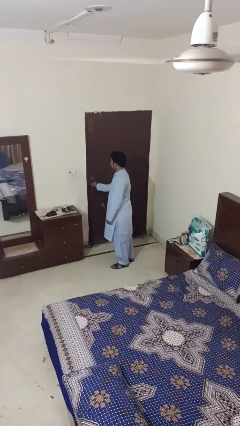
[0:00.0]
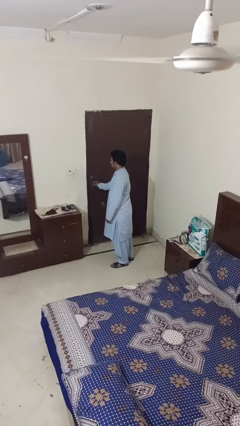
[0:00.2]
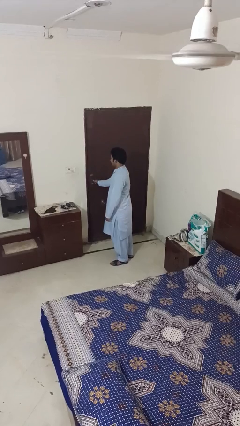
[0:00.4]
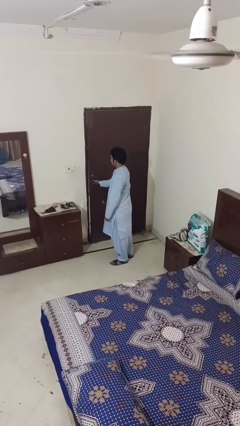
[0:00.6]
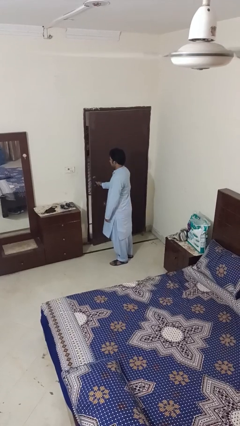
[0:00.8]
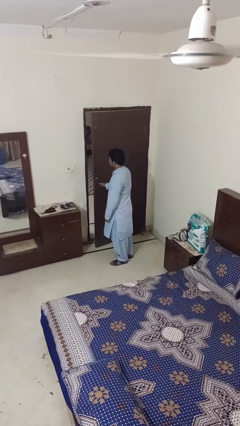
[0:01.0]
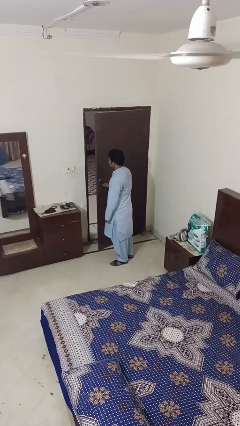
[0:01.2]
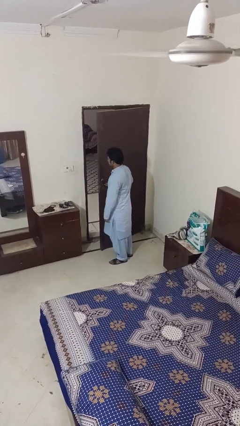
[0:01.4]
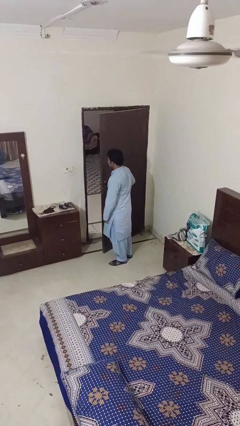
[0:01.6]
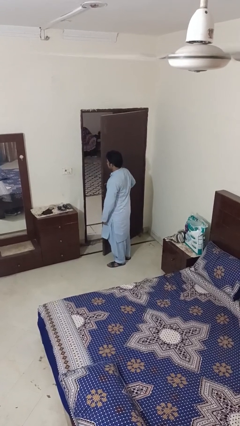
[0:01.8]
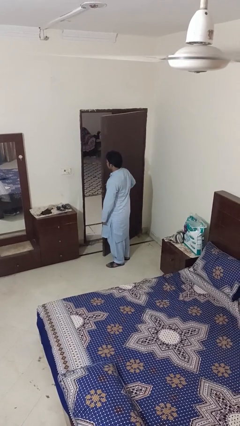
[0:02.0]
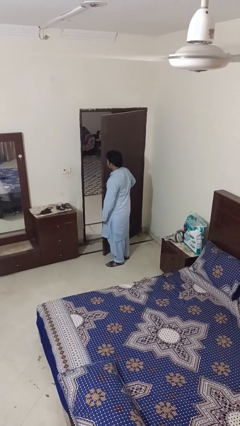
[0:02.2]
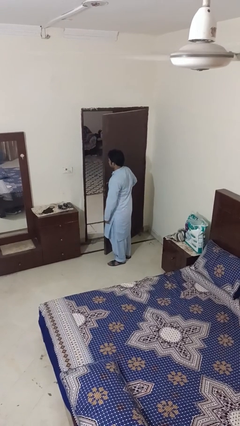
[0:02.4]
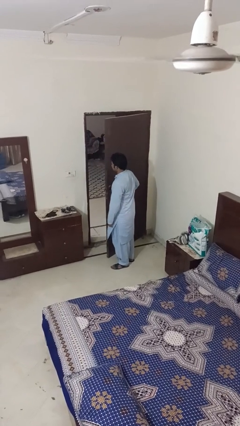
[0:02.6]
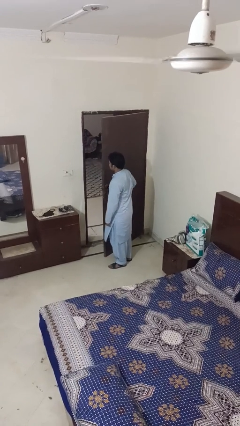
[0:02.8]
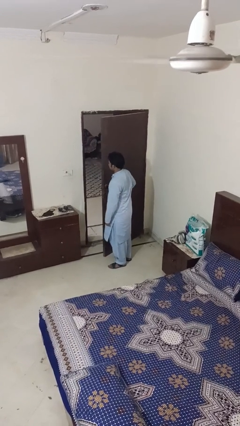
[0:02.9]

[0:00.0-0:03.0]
person opens facility door

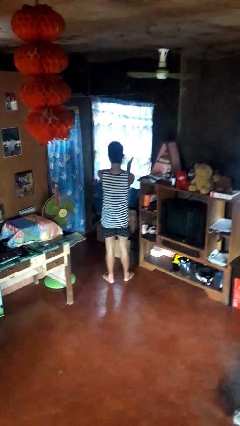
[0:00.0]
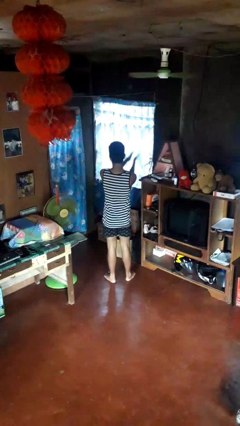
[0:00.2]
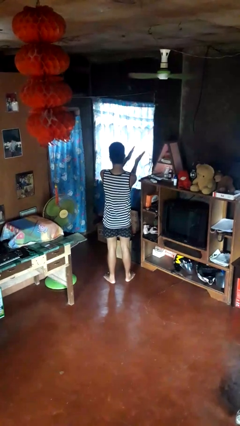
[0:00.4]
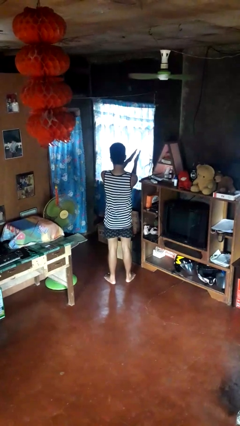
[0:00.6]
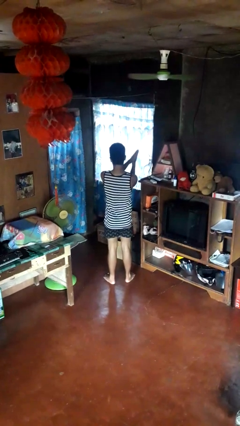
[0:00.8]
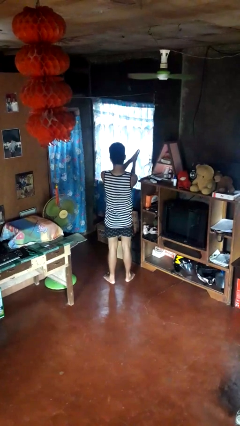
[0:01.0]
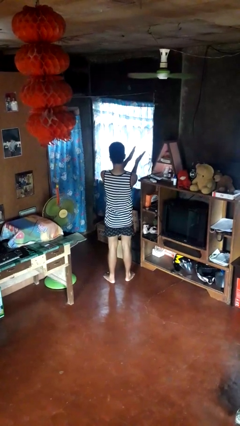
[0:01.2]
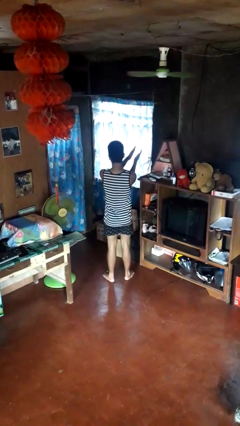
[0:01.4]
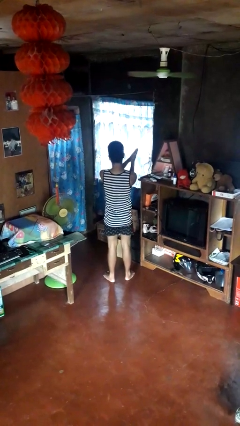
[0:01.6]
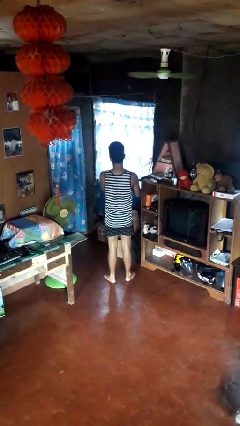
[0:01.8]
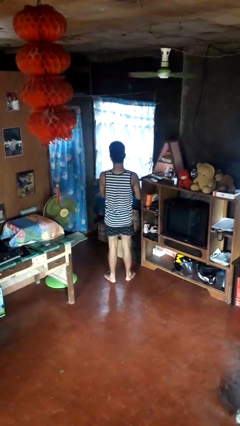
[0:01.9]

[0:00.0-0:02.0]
person claps hands

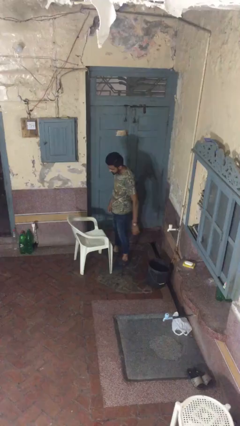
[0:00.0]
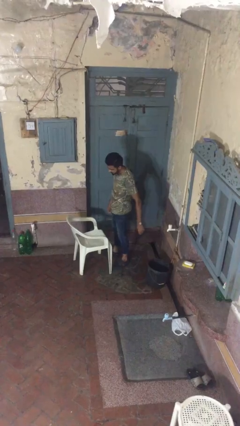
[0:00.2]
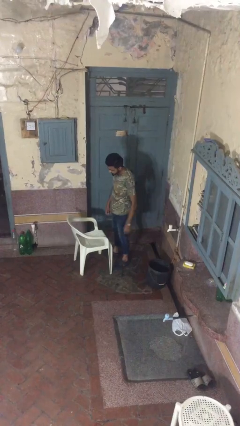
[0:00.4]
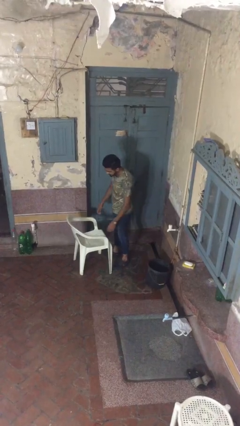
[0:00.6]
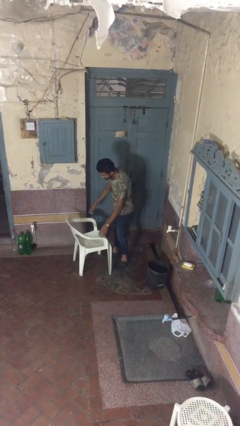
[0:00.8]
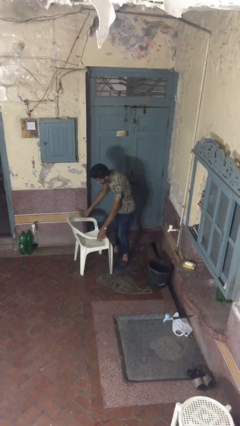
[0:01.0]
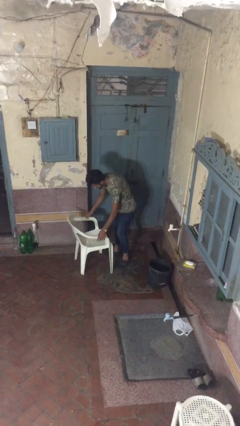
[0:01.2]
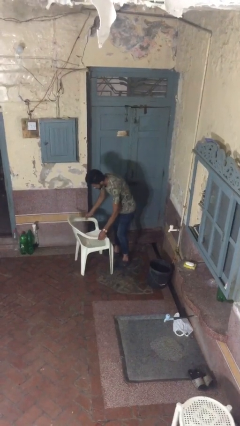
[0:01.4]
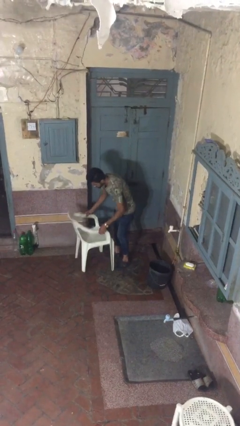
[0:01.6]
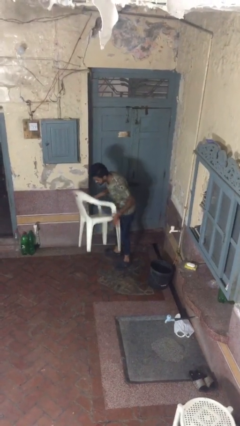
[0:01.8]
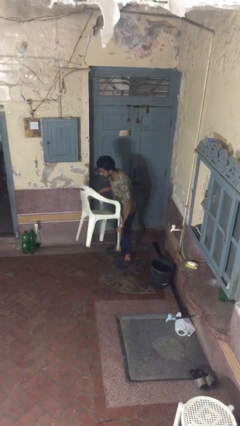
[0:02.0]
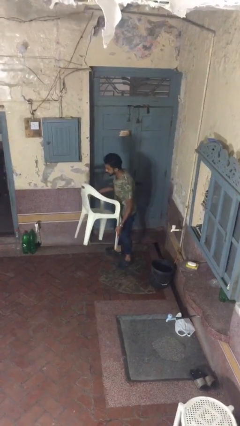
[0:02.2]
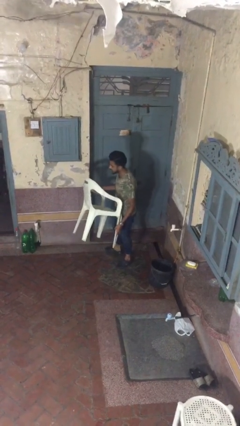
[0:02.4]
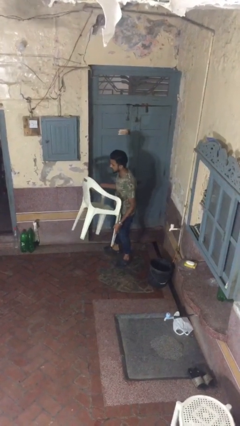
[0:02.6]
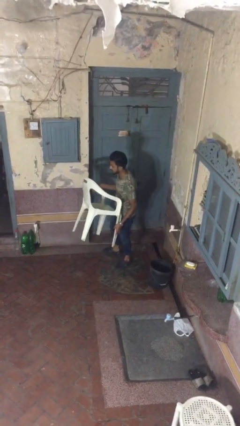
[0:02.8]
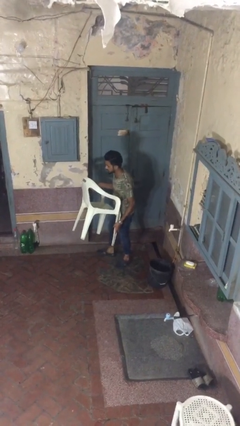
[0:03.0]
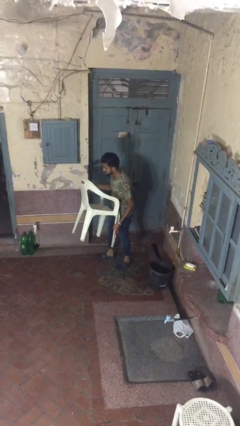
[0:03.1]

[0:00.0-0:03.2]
person picks up object from floor

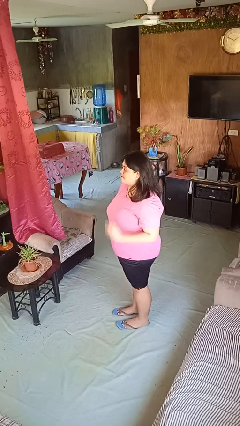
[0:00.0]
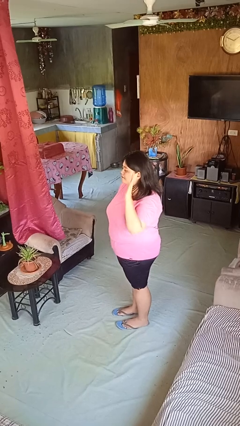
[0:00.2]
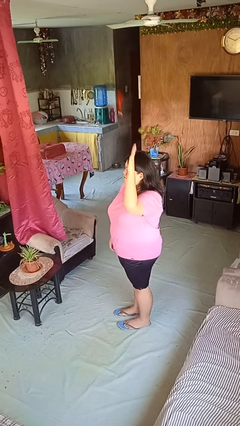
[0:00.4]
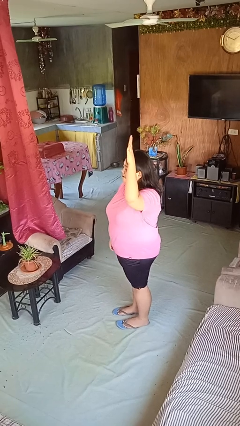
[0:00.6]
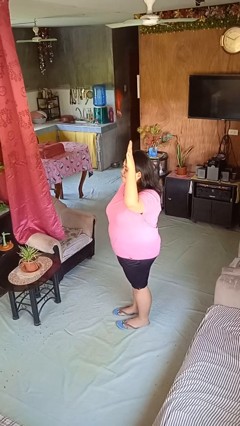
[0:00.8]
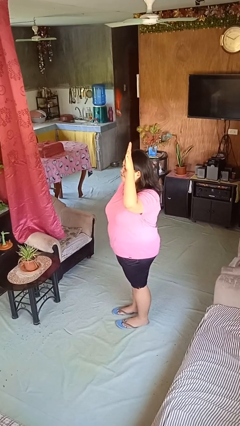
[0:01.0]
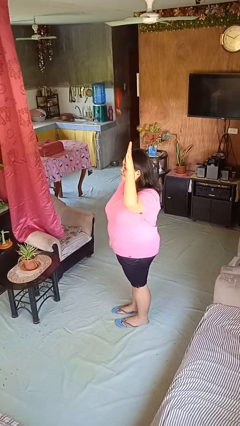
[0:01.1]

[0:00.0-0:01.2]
person gestures raise hand

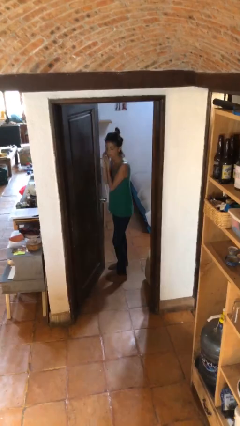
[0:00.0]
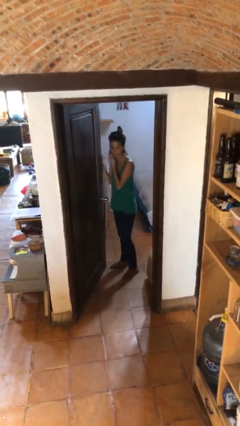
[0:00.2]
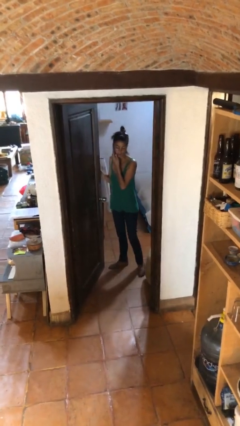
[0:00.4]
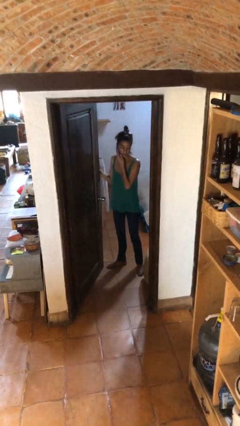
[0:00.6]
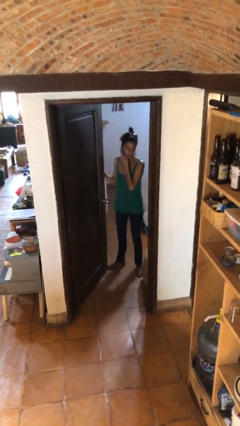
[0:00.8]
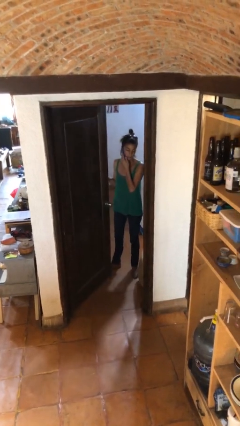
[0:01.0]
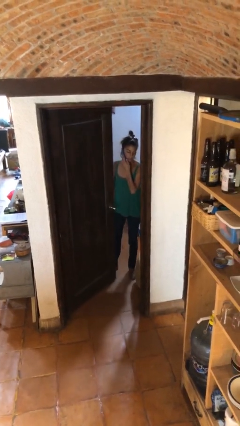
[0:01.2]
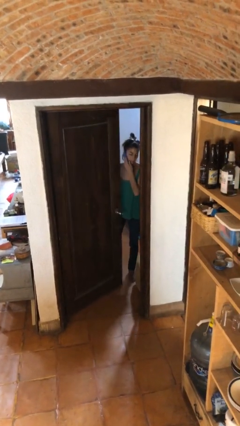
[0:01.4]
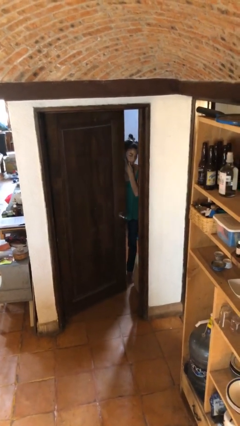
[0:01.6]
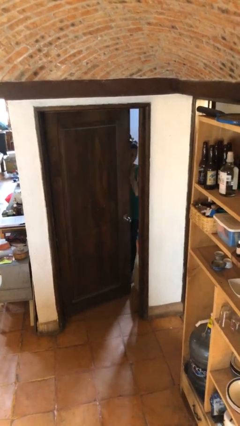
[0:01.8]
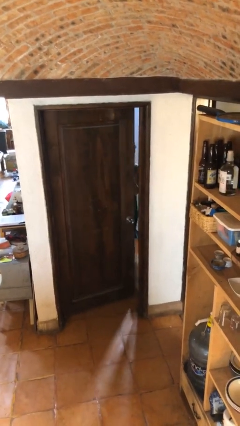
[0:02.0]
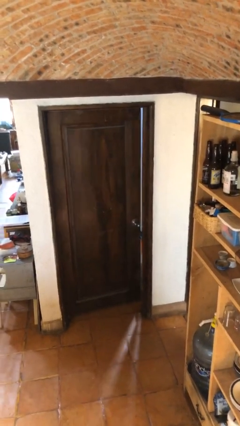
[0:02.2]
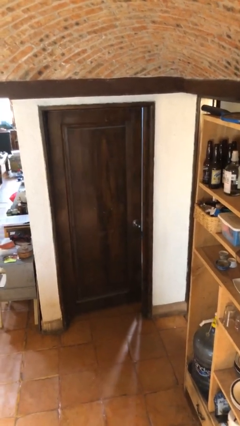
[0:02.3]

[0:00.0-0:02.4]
person closes facility door

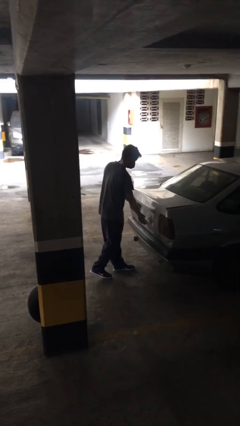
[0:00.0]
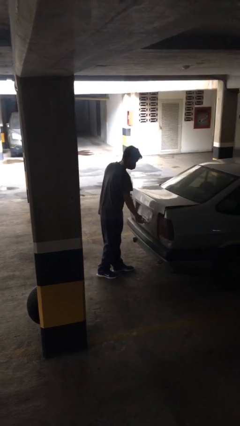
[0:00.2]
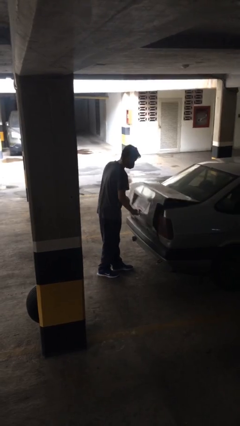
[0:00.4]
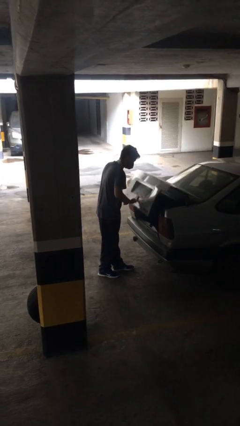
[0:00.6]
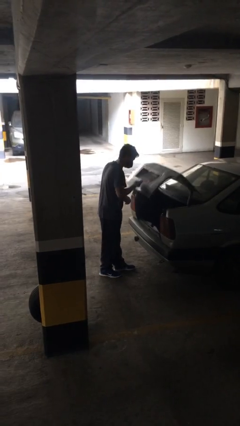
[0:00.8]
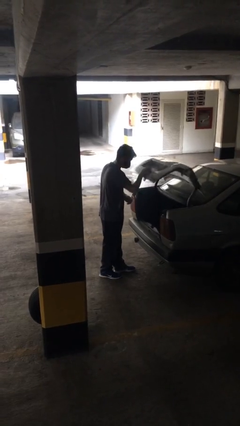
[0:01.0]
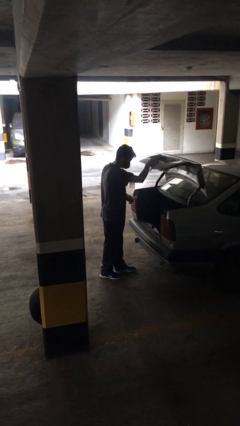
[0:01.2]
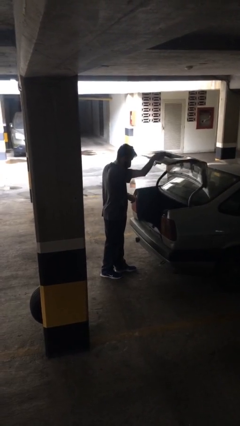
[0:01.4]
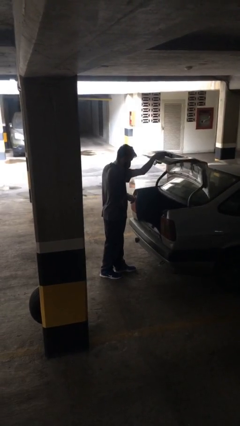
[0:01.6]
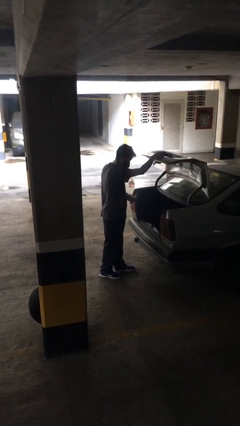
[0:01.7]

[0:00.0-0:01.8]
person opens car trunk

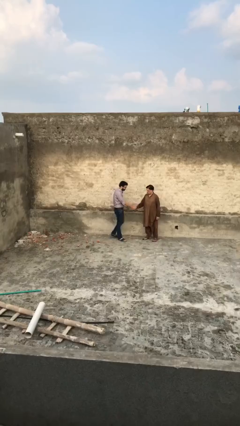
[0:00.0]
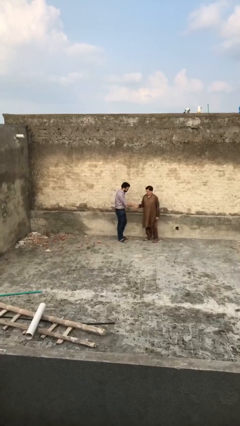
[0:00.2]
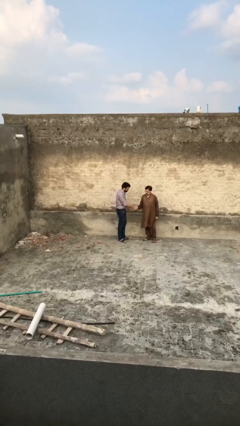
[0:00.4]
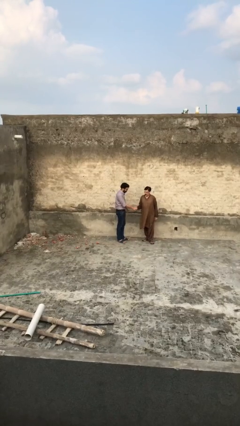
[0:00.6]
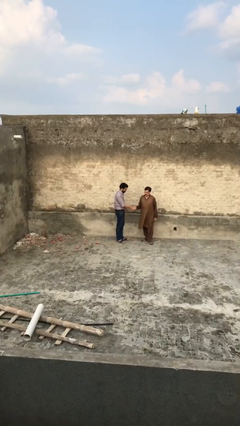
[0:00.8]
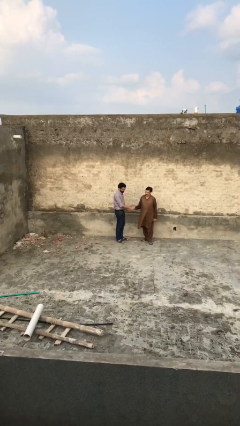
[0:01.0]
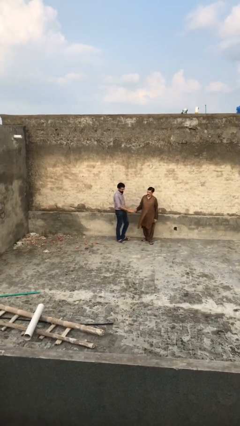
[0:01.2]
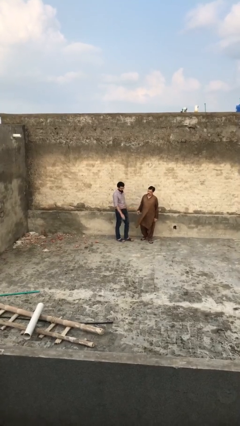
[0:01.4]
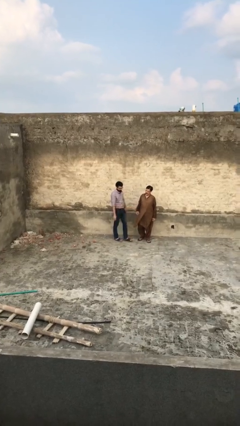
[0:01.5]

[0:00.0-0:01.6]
person shakes hand

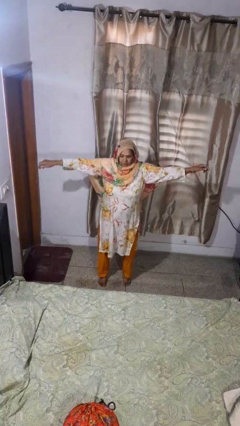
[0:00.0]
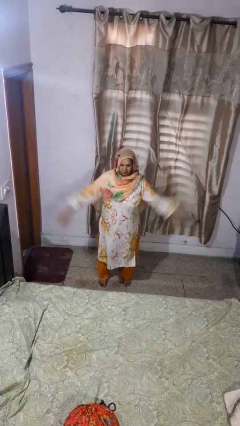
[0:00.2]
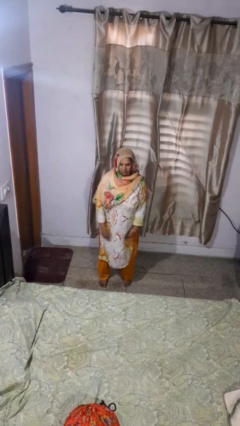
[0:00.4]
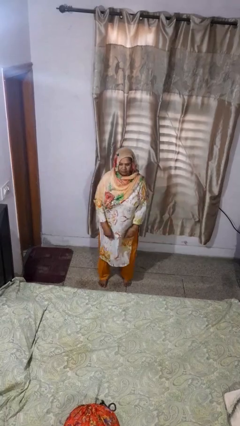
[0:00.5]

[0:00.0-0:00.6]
person jumps

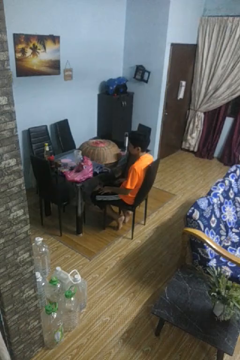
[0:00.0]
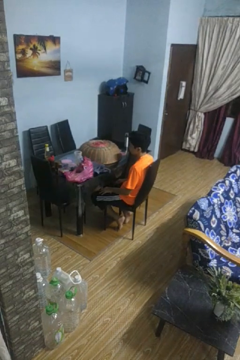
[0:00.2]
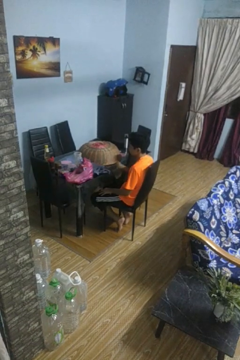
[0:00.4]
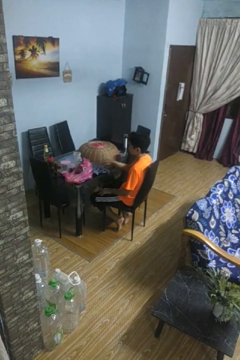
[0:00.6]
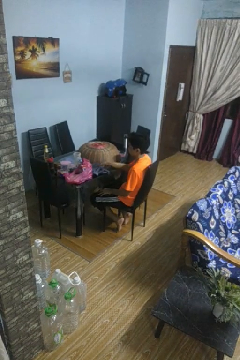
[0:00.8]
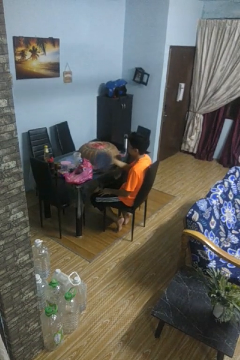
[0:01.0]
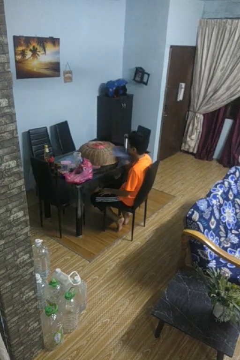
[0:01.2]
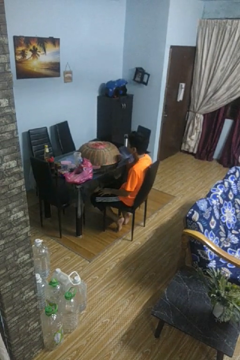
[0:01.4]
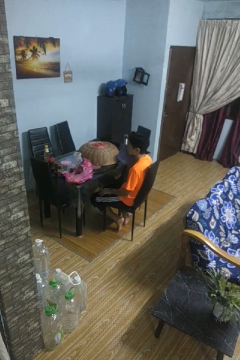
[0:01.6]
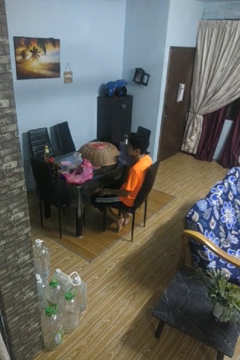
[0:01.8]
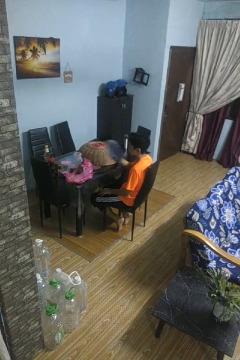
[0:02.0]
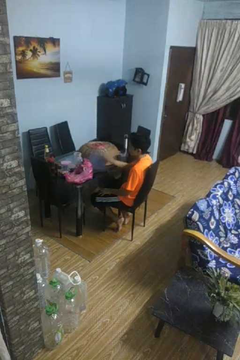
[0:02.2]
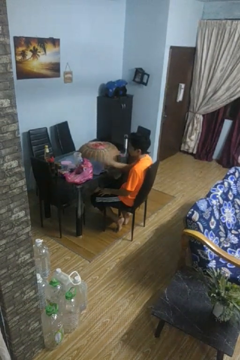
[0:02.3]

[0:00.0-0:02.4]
person wipes mouth with napkin
